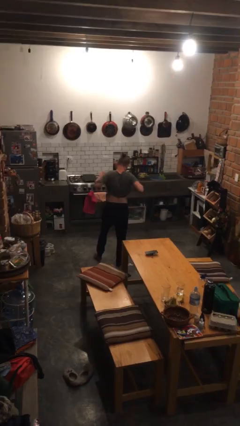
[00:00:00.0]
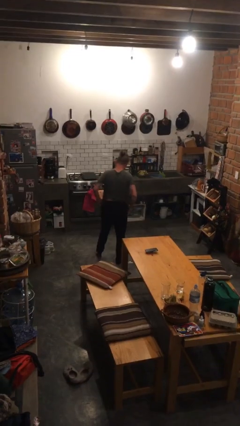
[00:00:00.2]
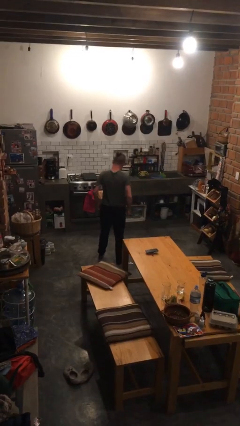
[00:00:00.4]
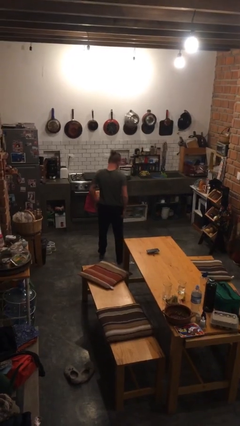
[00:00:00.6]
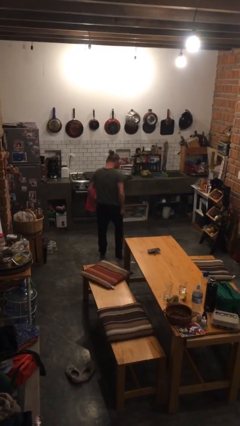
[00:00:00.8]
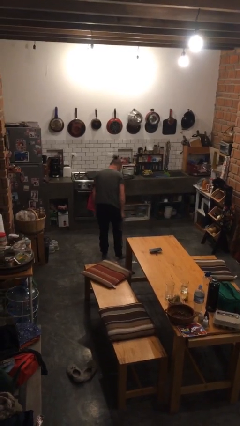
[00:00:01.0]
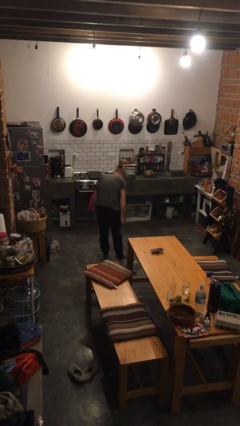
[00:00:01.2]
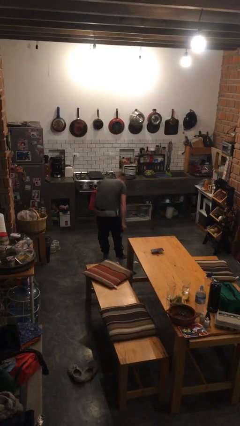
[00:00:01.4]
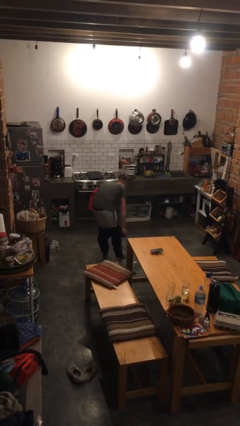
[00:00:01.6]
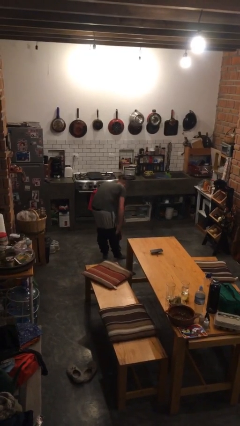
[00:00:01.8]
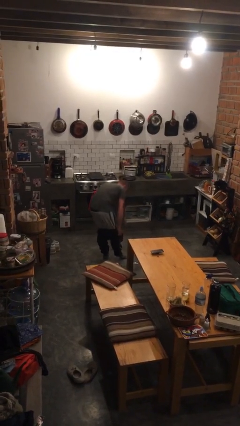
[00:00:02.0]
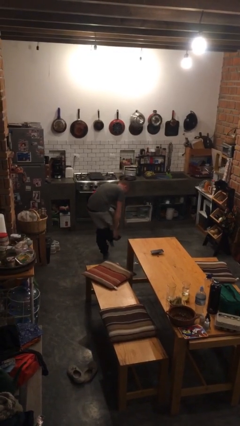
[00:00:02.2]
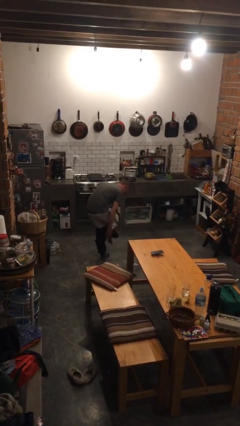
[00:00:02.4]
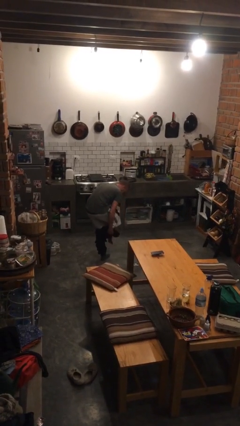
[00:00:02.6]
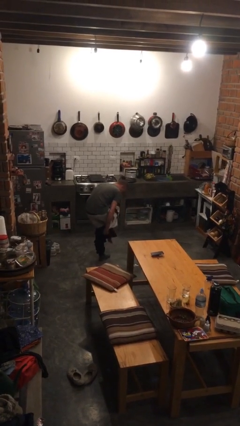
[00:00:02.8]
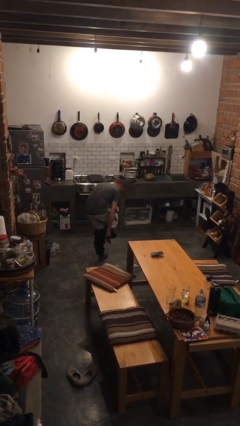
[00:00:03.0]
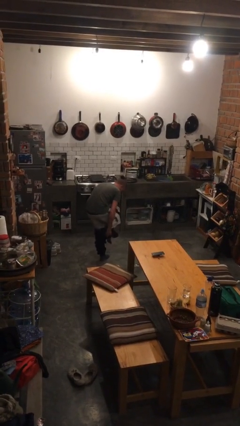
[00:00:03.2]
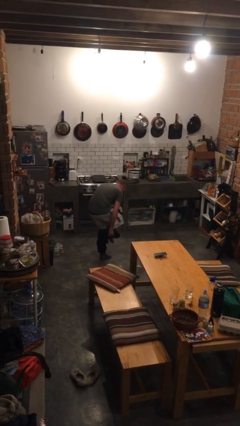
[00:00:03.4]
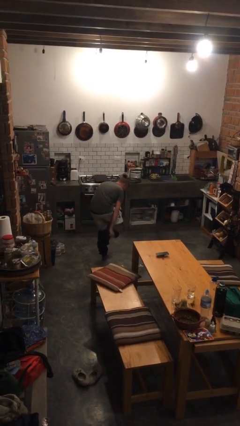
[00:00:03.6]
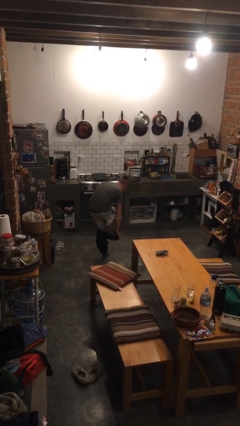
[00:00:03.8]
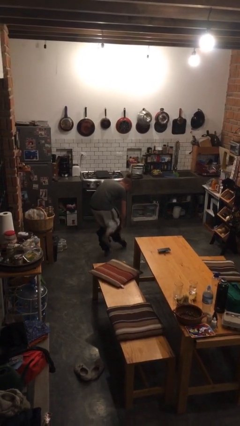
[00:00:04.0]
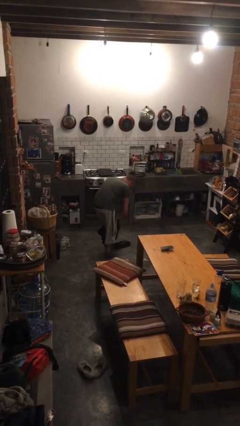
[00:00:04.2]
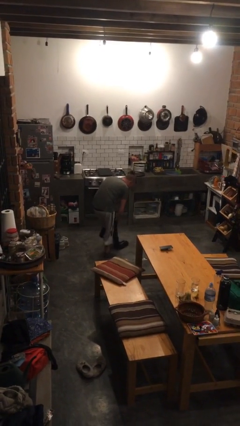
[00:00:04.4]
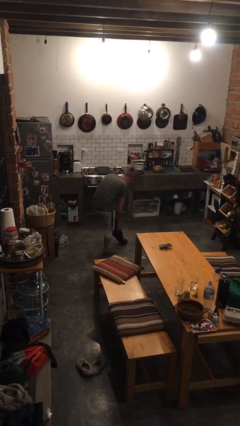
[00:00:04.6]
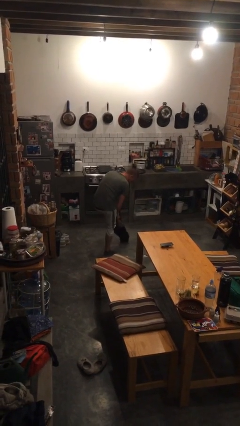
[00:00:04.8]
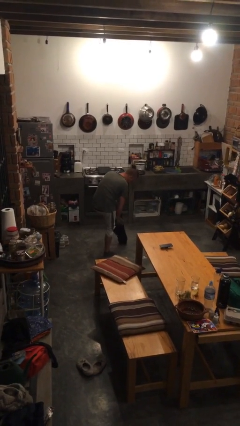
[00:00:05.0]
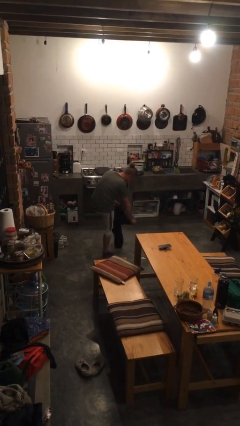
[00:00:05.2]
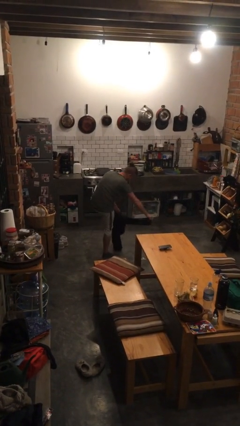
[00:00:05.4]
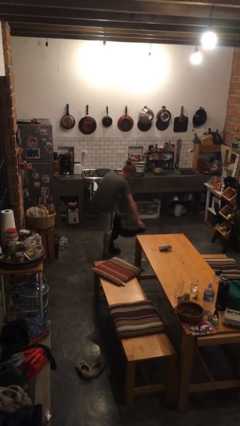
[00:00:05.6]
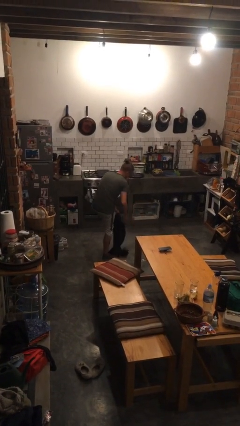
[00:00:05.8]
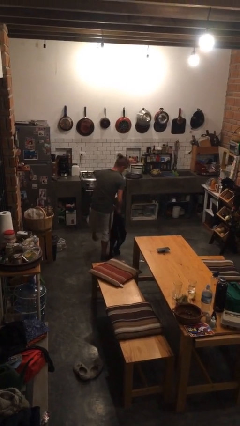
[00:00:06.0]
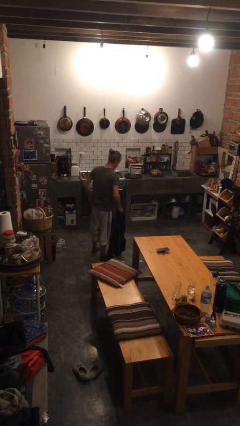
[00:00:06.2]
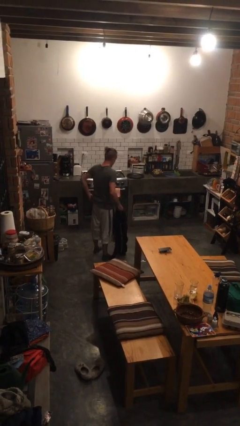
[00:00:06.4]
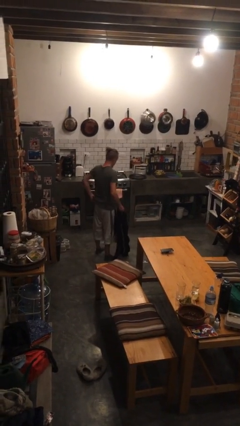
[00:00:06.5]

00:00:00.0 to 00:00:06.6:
person takes off pants

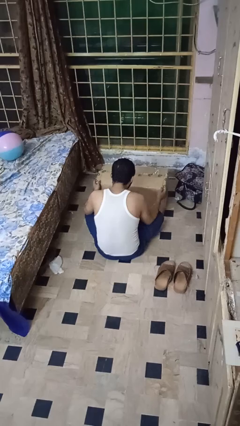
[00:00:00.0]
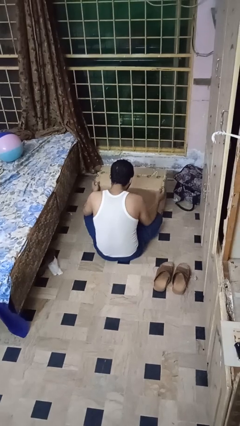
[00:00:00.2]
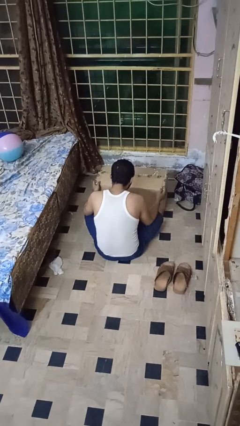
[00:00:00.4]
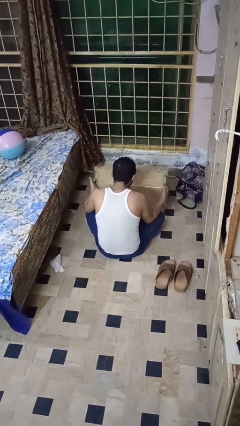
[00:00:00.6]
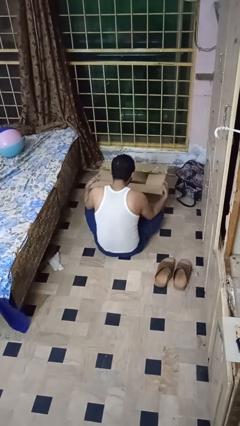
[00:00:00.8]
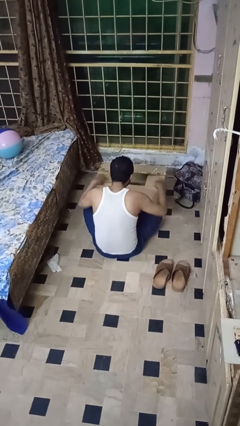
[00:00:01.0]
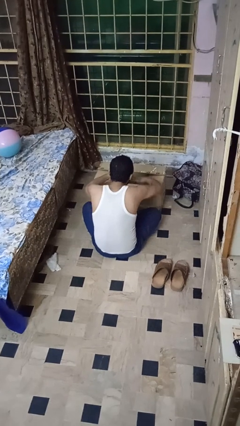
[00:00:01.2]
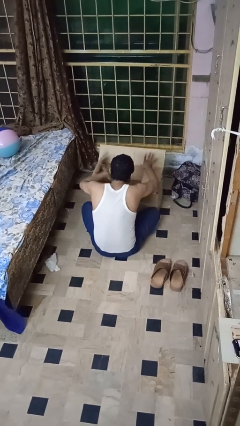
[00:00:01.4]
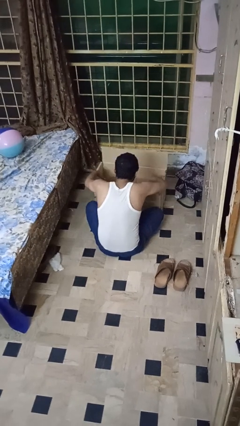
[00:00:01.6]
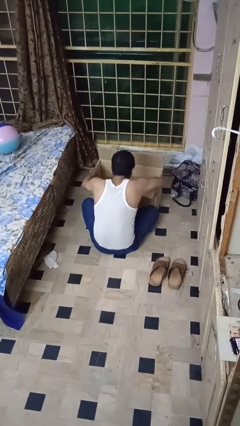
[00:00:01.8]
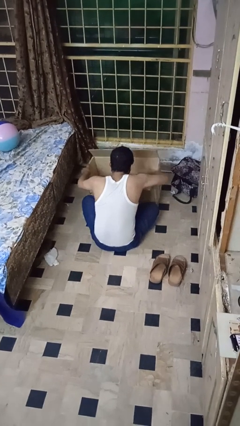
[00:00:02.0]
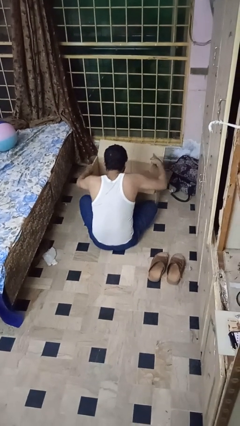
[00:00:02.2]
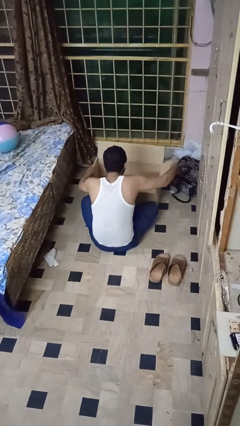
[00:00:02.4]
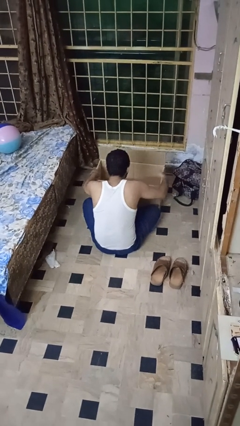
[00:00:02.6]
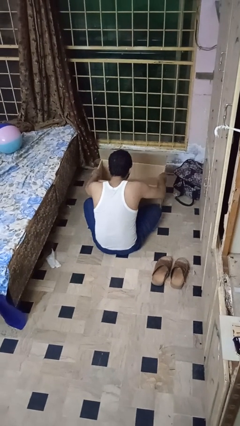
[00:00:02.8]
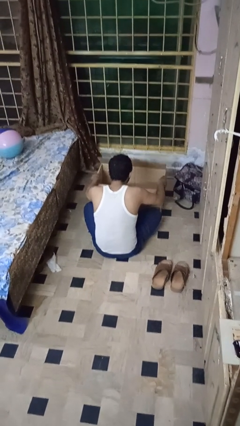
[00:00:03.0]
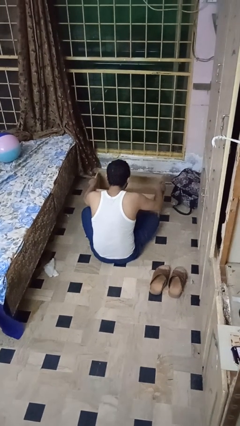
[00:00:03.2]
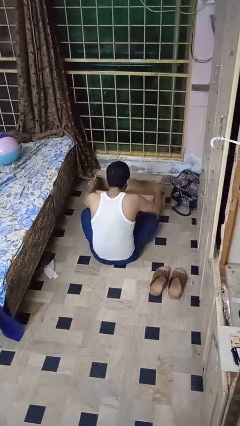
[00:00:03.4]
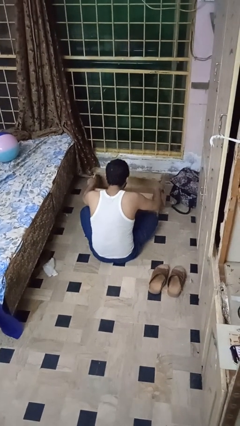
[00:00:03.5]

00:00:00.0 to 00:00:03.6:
person opens box

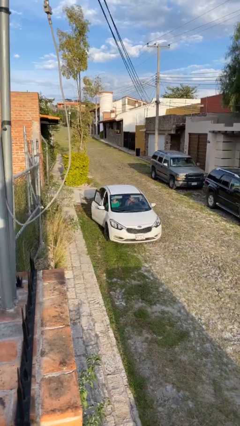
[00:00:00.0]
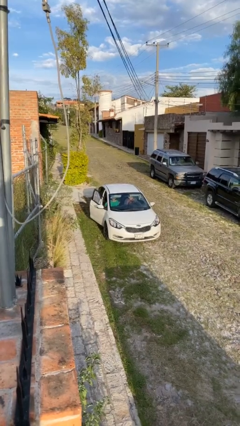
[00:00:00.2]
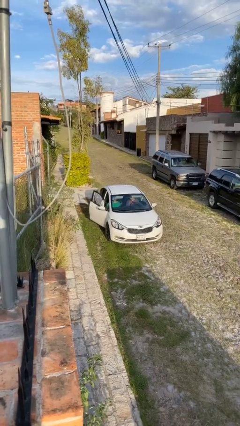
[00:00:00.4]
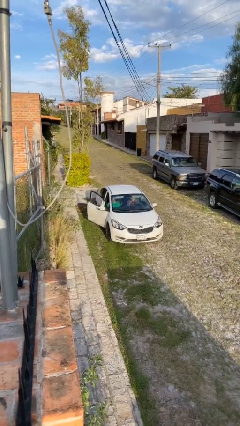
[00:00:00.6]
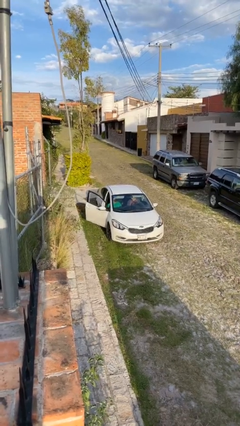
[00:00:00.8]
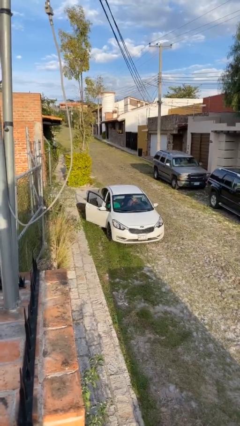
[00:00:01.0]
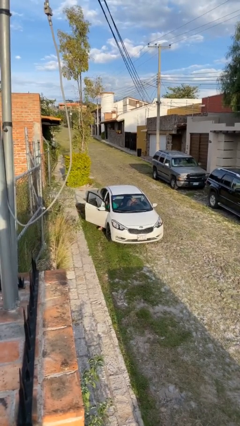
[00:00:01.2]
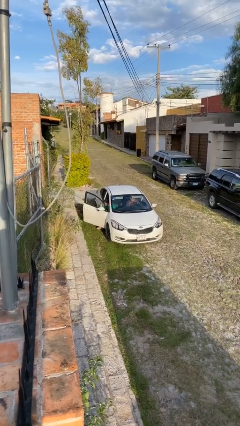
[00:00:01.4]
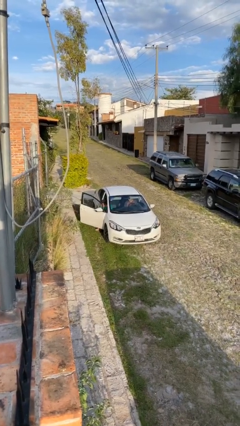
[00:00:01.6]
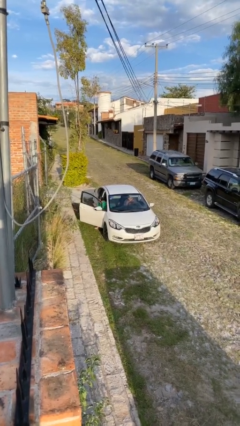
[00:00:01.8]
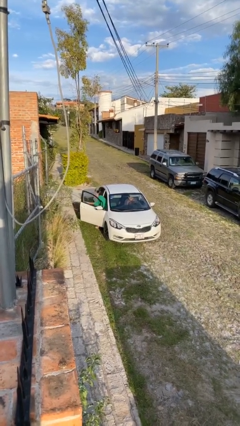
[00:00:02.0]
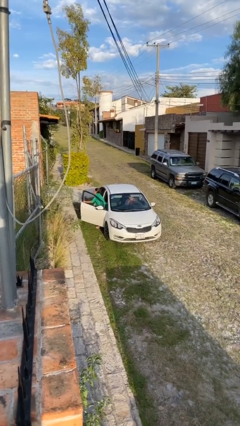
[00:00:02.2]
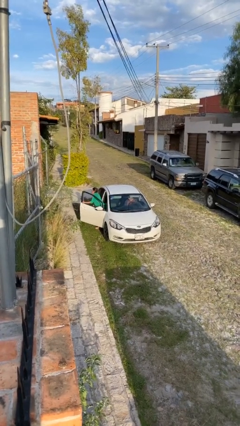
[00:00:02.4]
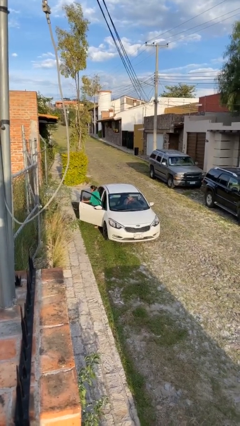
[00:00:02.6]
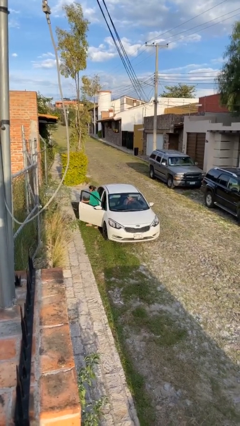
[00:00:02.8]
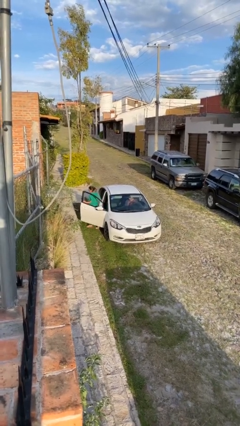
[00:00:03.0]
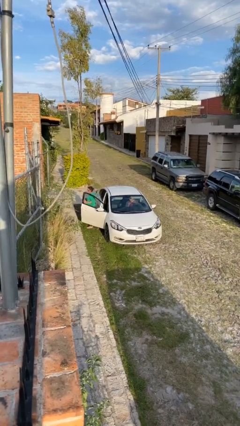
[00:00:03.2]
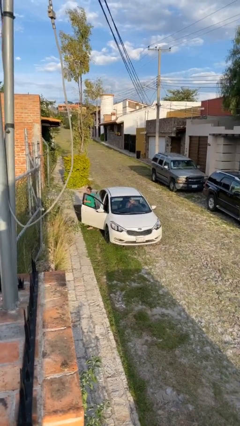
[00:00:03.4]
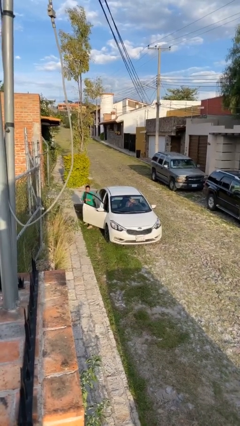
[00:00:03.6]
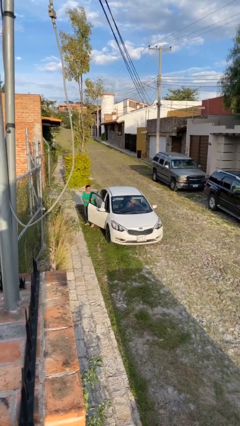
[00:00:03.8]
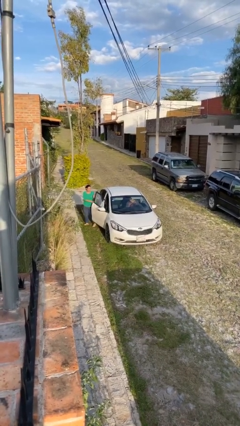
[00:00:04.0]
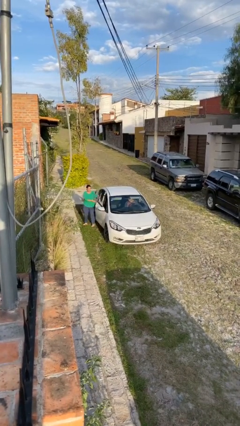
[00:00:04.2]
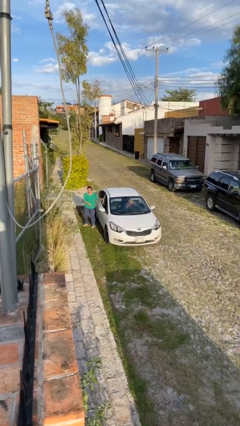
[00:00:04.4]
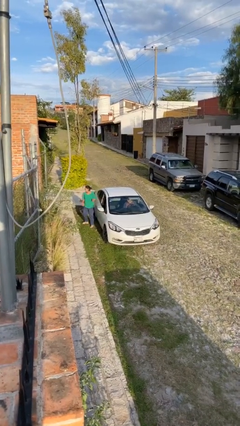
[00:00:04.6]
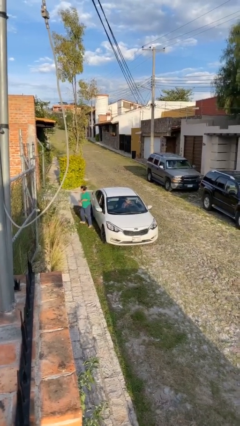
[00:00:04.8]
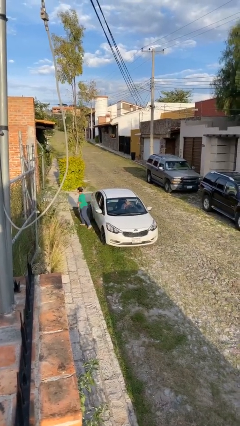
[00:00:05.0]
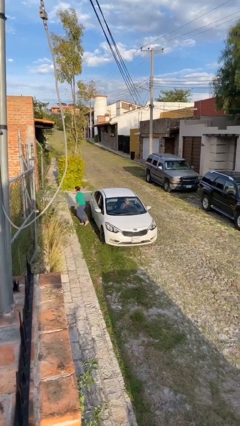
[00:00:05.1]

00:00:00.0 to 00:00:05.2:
car drops off person

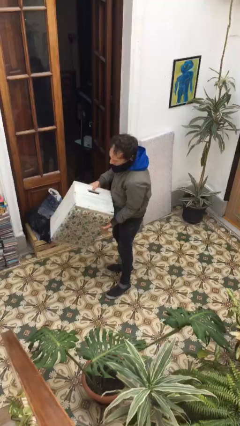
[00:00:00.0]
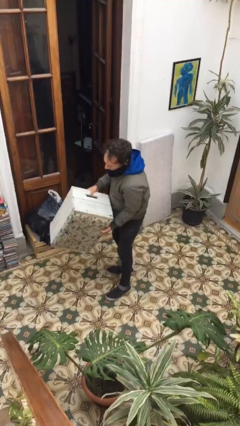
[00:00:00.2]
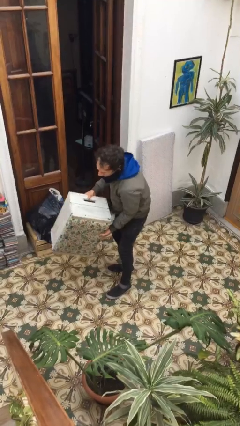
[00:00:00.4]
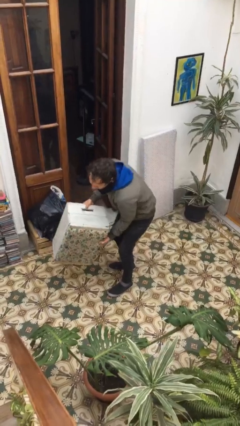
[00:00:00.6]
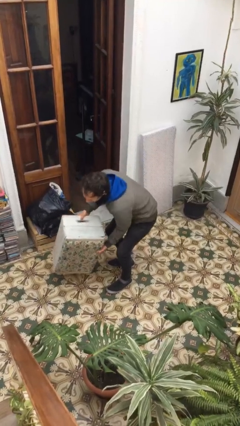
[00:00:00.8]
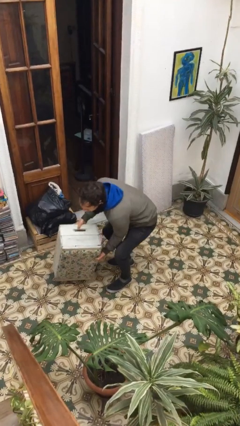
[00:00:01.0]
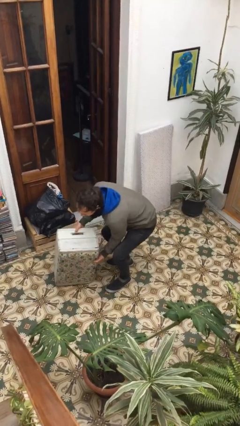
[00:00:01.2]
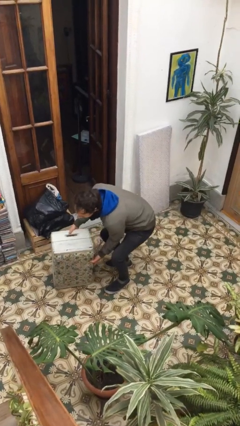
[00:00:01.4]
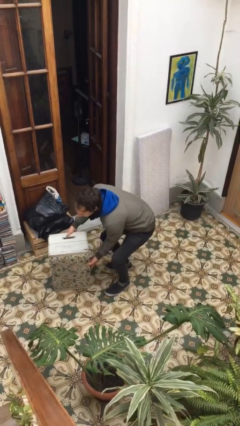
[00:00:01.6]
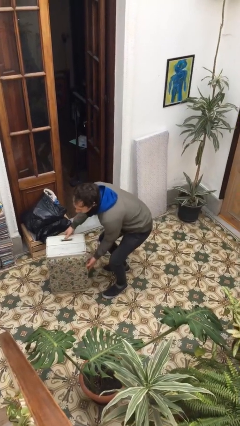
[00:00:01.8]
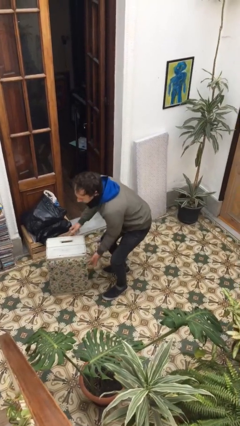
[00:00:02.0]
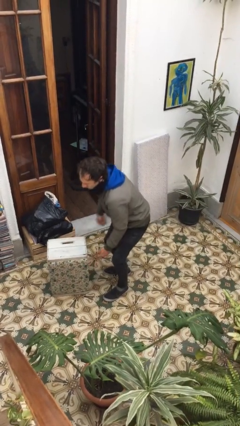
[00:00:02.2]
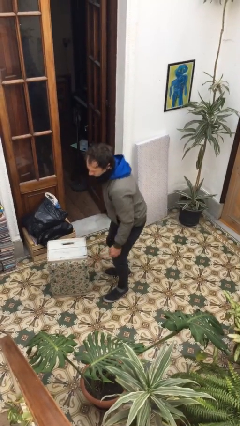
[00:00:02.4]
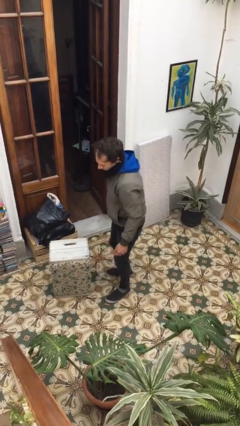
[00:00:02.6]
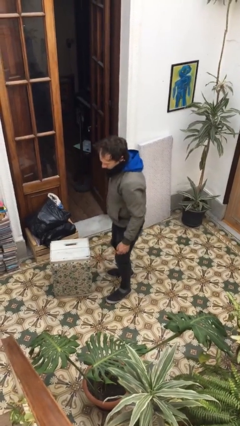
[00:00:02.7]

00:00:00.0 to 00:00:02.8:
person puts down object on floor
